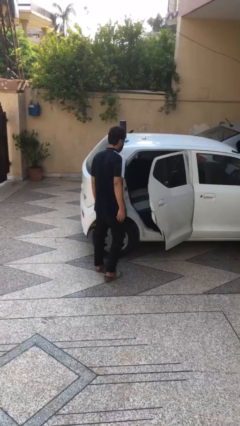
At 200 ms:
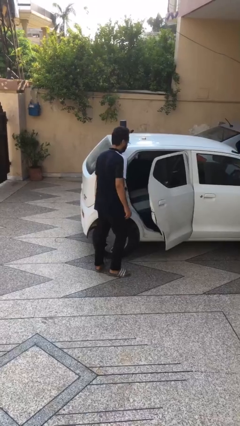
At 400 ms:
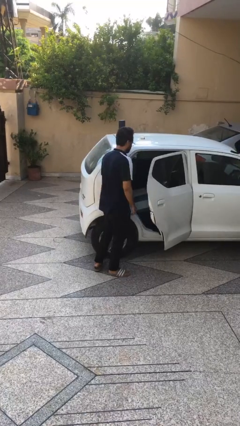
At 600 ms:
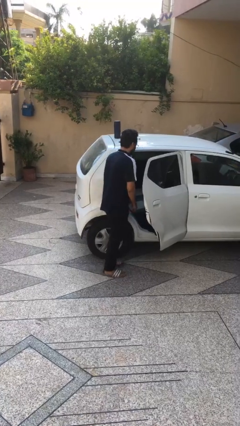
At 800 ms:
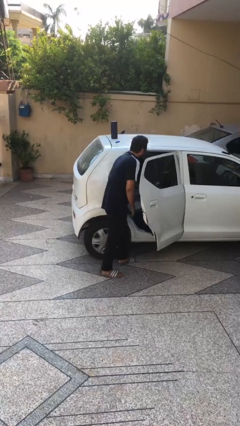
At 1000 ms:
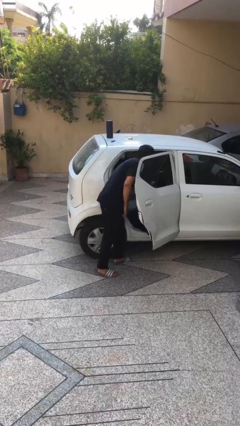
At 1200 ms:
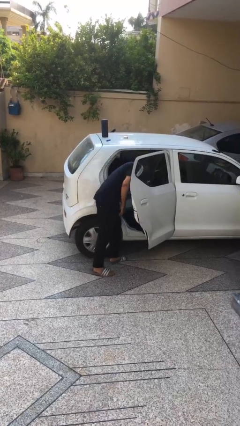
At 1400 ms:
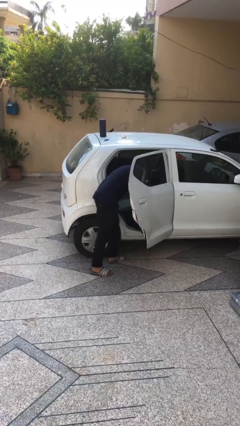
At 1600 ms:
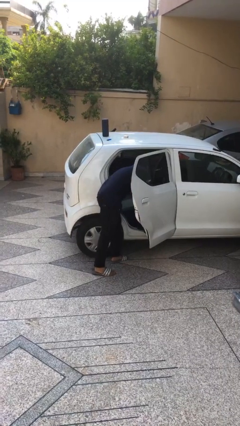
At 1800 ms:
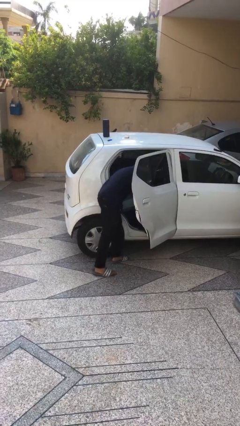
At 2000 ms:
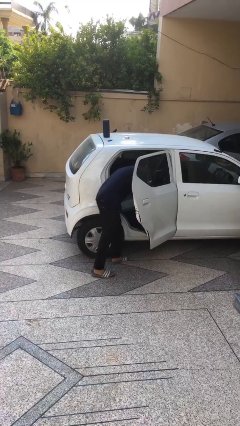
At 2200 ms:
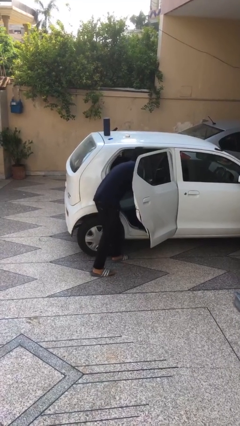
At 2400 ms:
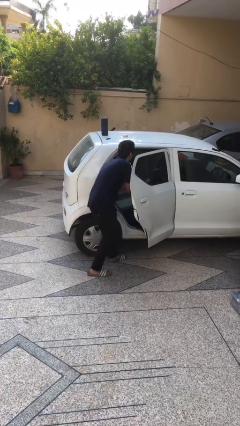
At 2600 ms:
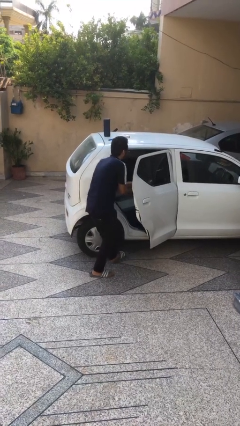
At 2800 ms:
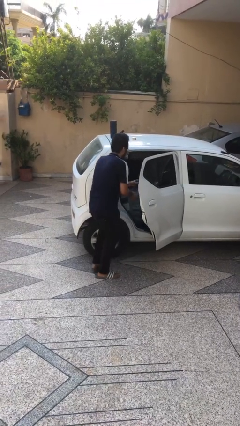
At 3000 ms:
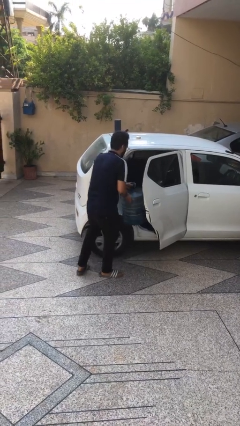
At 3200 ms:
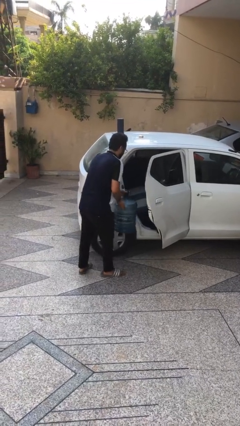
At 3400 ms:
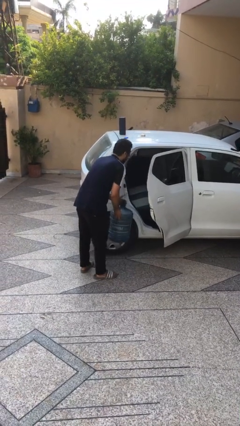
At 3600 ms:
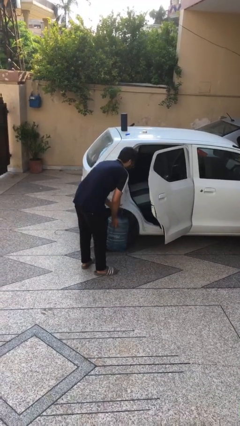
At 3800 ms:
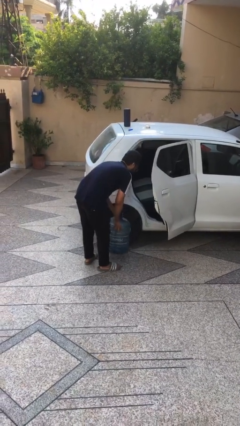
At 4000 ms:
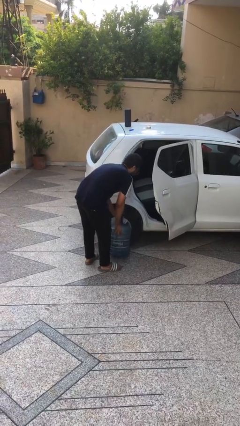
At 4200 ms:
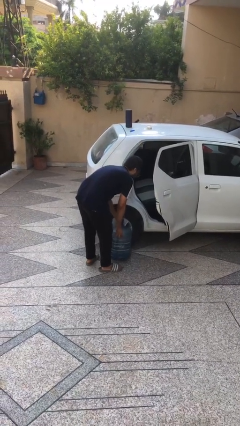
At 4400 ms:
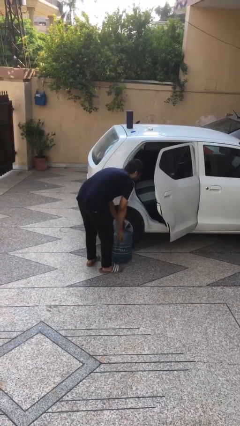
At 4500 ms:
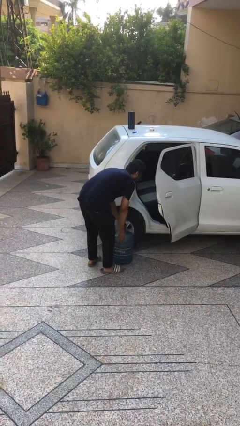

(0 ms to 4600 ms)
person unloads car

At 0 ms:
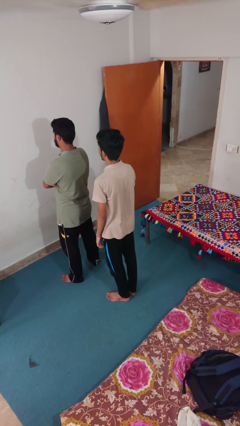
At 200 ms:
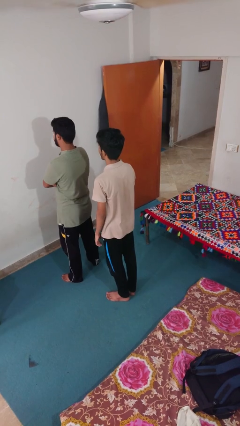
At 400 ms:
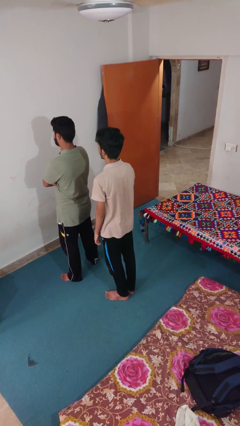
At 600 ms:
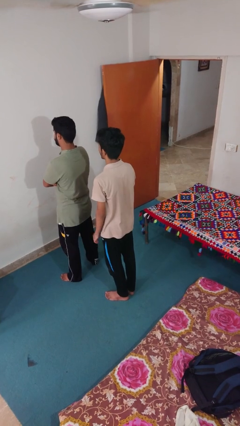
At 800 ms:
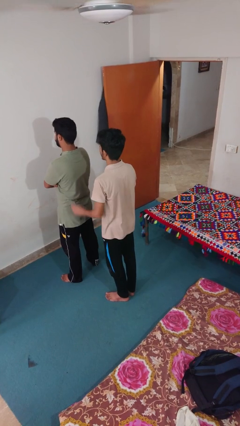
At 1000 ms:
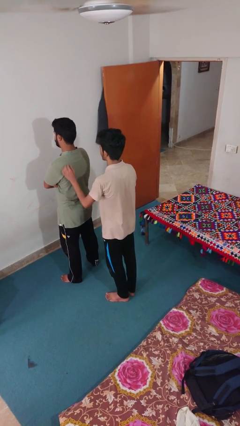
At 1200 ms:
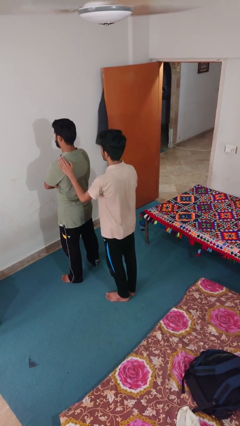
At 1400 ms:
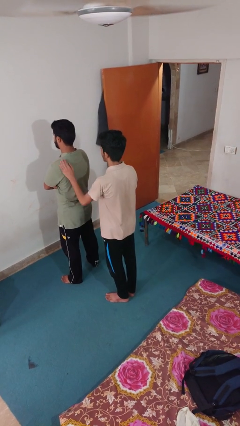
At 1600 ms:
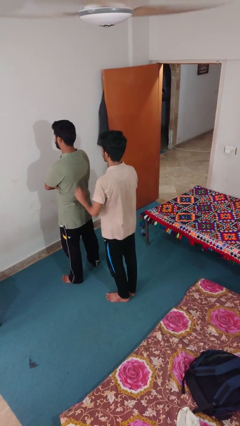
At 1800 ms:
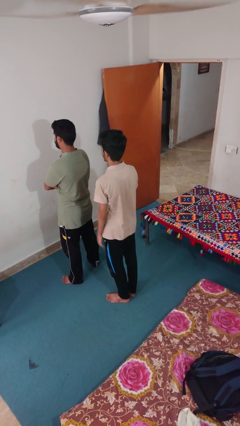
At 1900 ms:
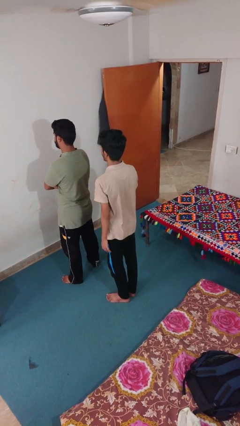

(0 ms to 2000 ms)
person touches back of person

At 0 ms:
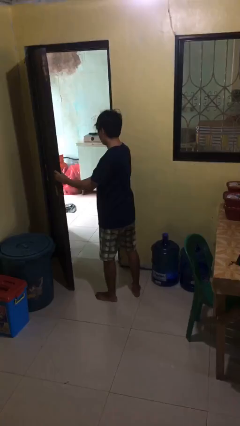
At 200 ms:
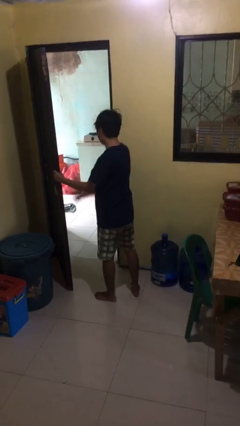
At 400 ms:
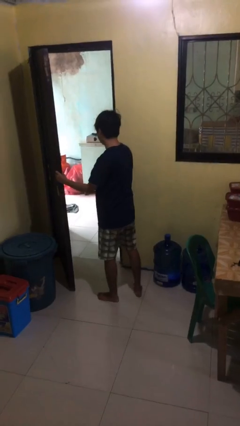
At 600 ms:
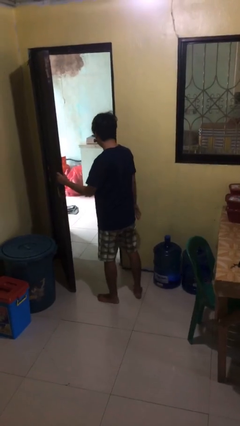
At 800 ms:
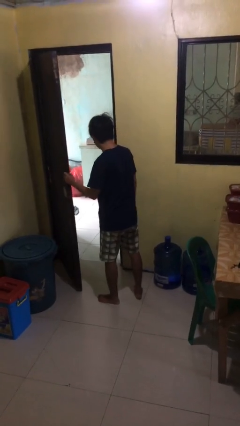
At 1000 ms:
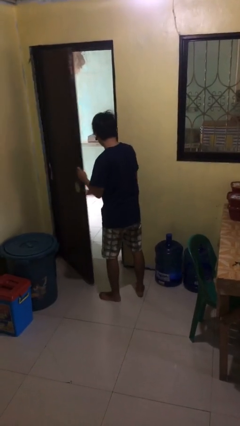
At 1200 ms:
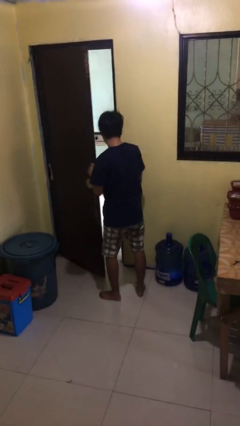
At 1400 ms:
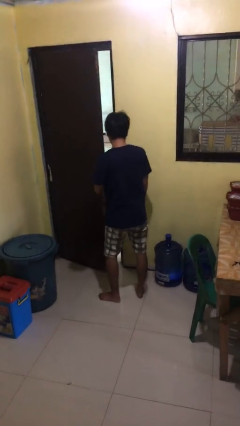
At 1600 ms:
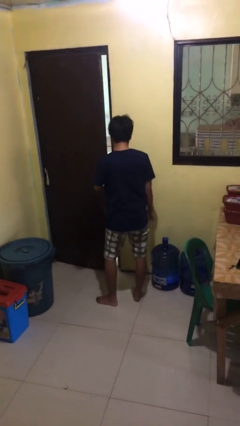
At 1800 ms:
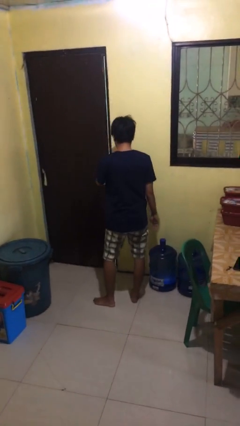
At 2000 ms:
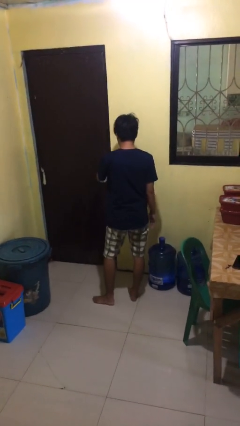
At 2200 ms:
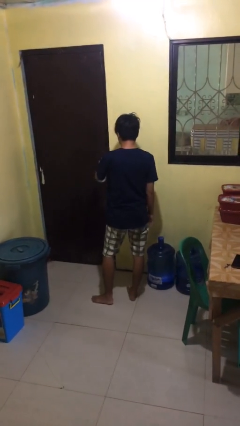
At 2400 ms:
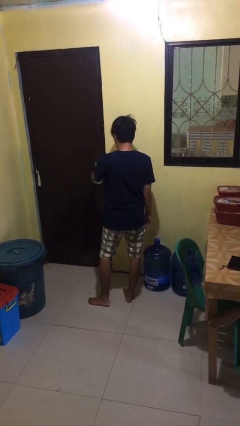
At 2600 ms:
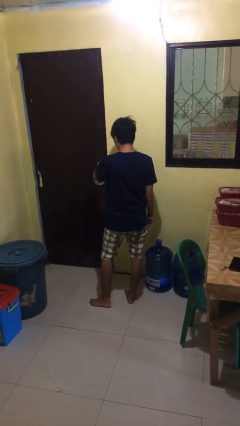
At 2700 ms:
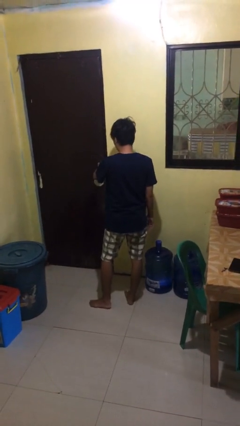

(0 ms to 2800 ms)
person closes facility door

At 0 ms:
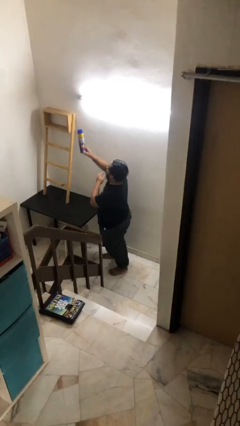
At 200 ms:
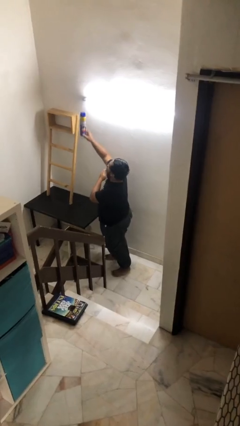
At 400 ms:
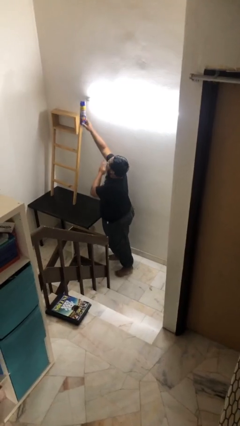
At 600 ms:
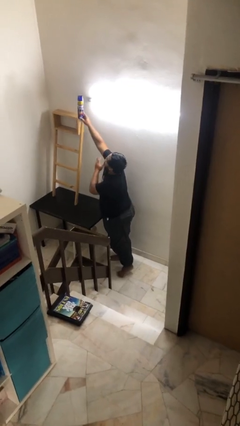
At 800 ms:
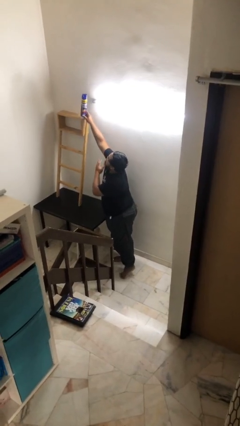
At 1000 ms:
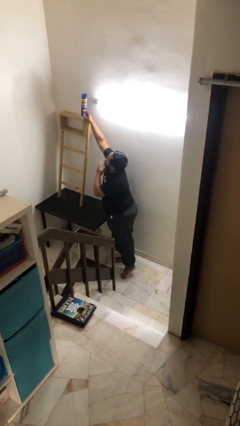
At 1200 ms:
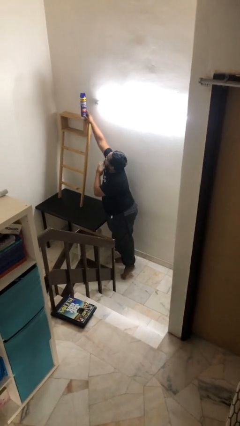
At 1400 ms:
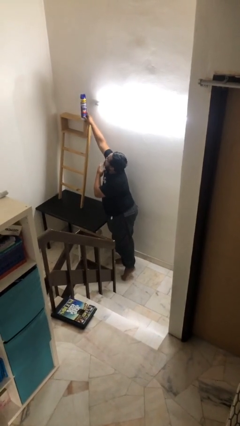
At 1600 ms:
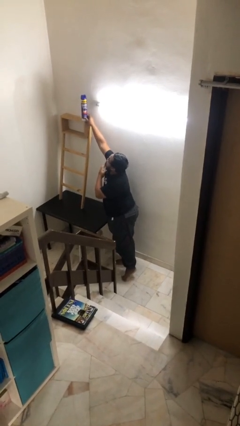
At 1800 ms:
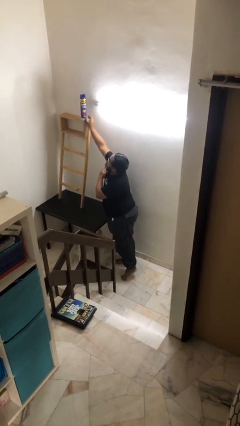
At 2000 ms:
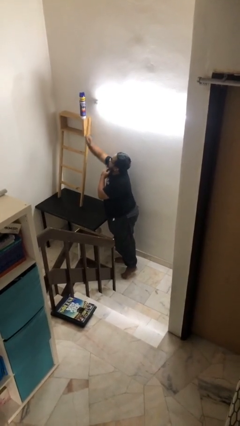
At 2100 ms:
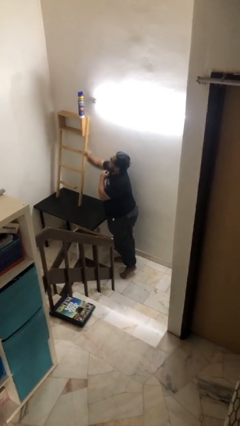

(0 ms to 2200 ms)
person puts down object on shelf

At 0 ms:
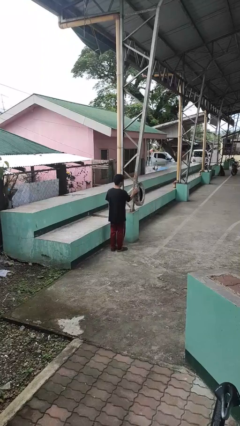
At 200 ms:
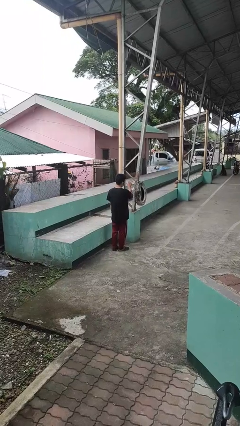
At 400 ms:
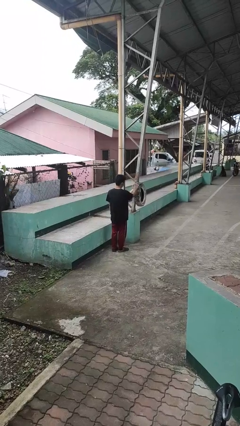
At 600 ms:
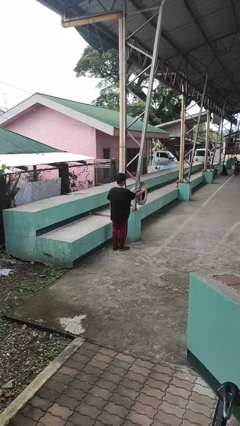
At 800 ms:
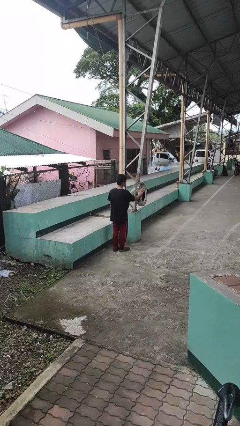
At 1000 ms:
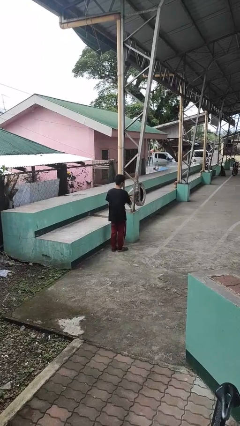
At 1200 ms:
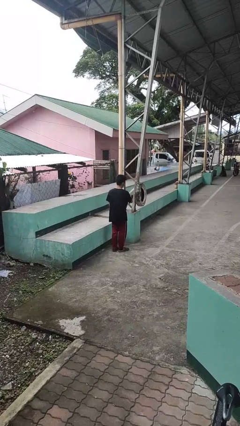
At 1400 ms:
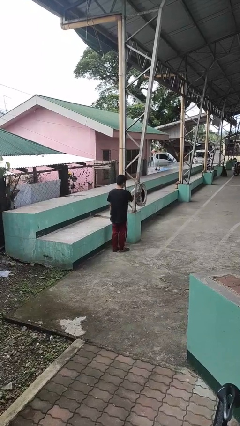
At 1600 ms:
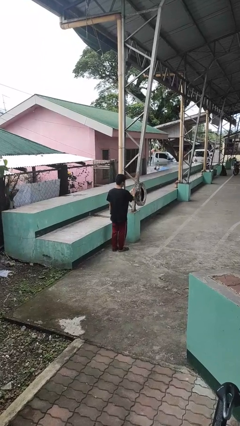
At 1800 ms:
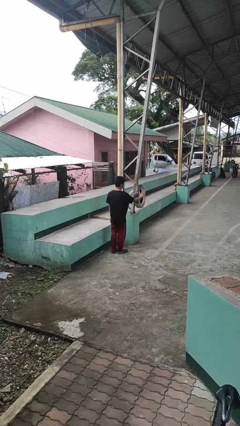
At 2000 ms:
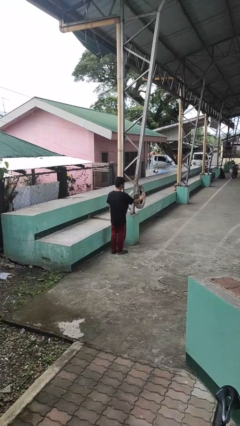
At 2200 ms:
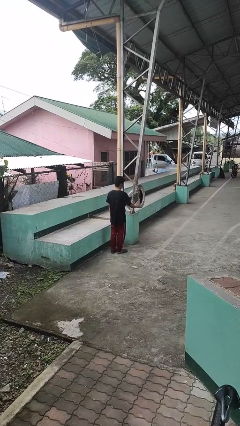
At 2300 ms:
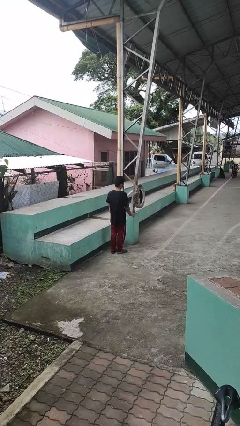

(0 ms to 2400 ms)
person waves hand over object

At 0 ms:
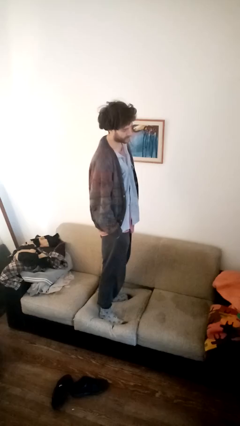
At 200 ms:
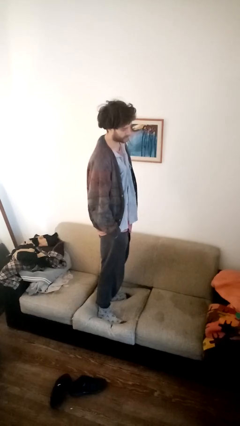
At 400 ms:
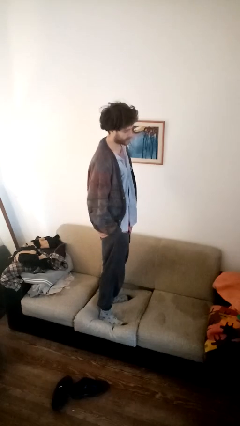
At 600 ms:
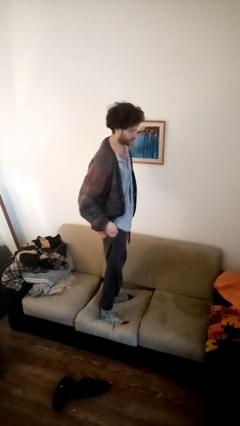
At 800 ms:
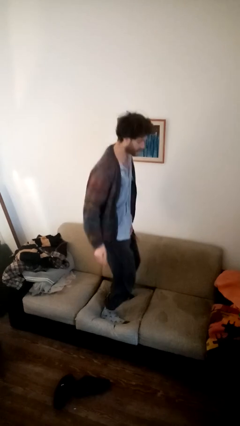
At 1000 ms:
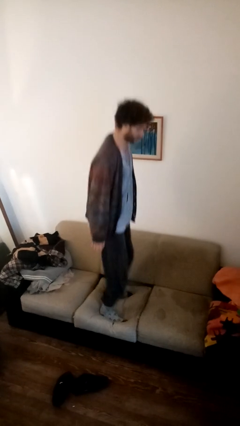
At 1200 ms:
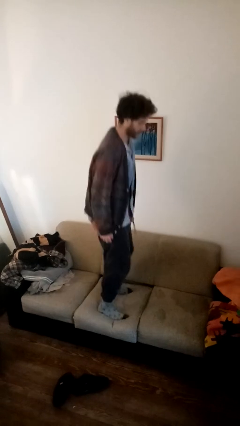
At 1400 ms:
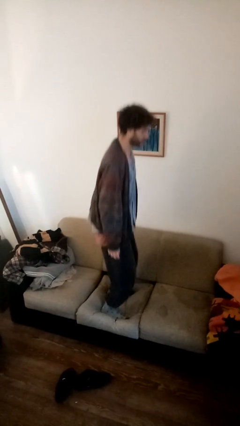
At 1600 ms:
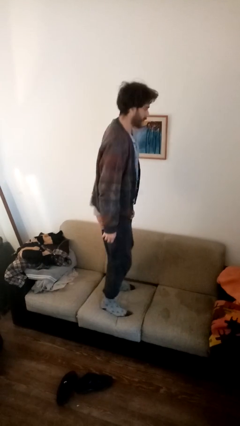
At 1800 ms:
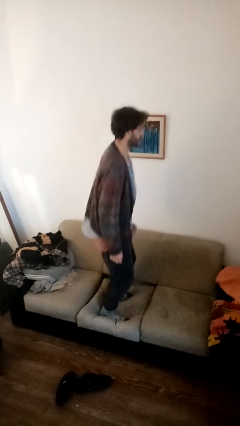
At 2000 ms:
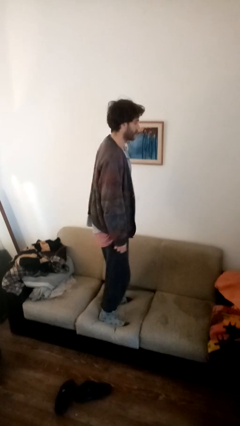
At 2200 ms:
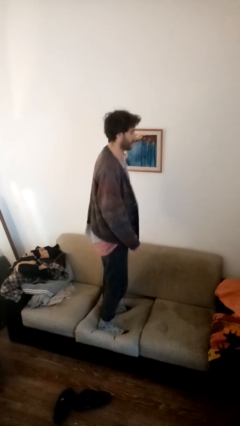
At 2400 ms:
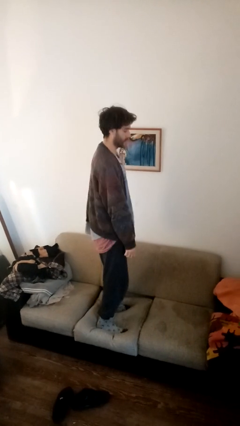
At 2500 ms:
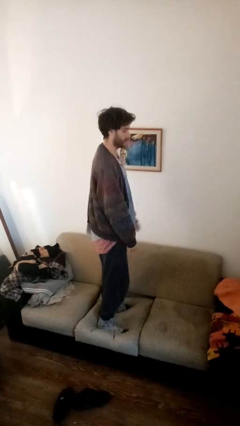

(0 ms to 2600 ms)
person jumps on couch

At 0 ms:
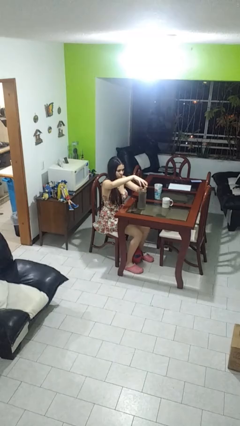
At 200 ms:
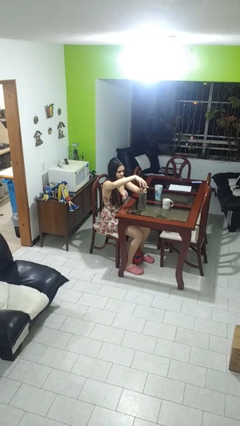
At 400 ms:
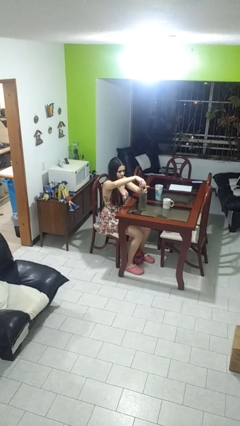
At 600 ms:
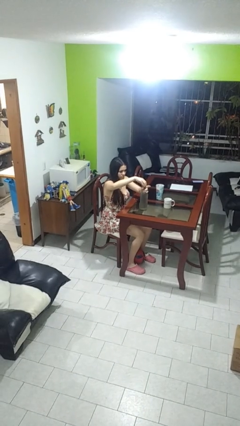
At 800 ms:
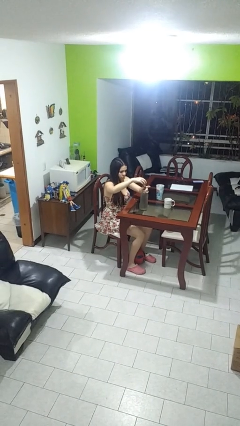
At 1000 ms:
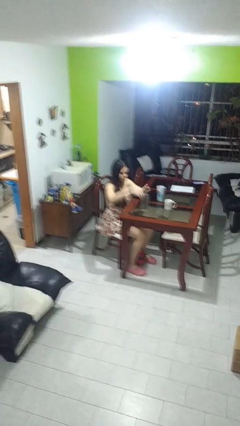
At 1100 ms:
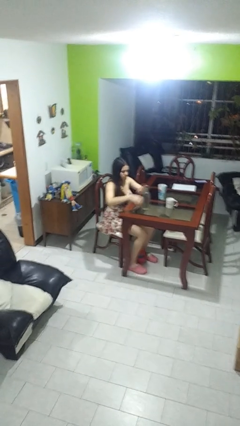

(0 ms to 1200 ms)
person unscrews lid from bottle
